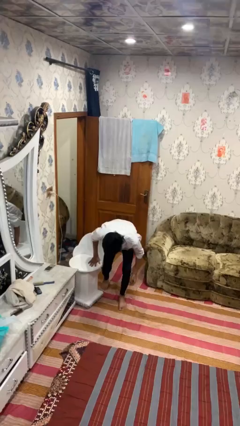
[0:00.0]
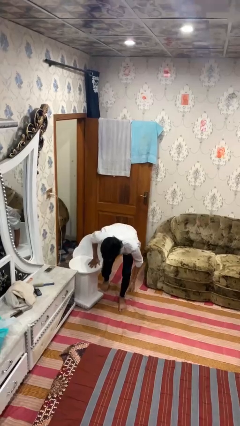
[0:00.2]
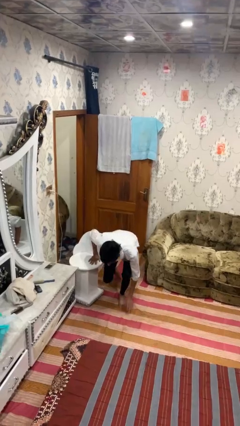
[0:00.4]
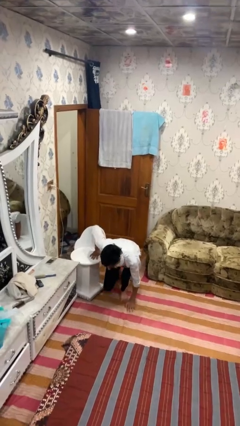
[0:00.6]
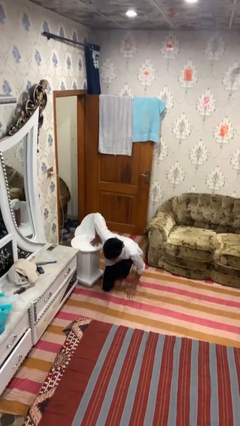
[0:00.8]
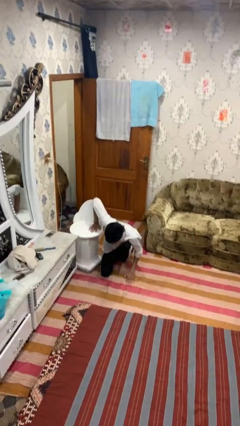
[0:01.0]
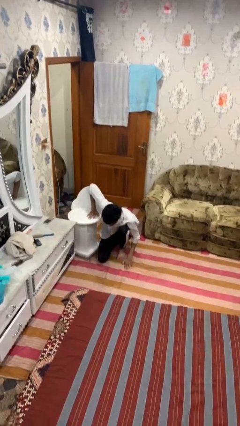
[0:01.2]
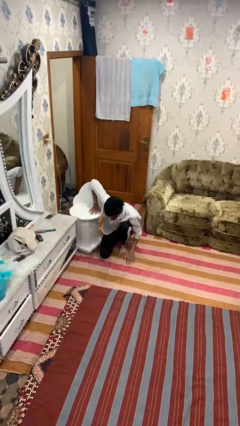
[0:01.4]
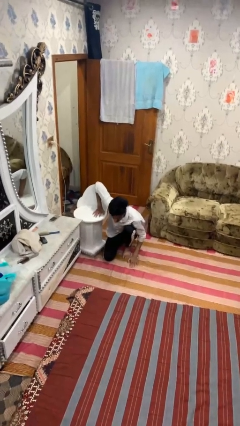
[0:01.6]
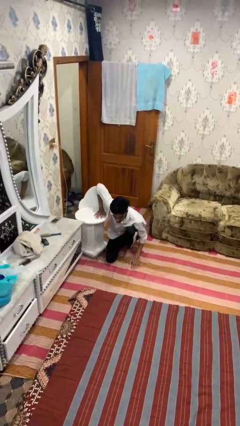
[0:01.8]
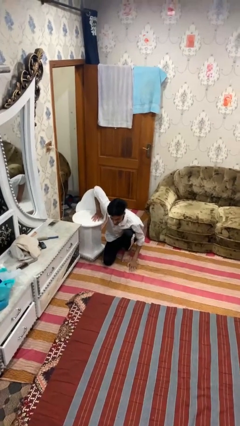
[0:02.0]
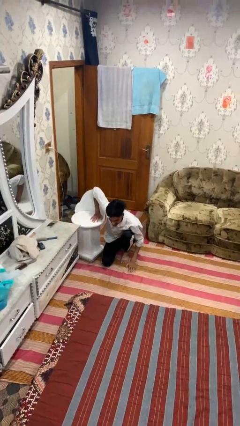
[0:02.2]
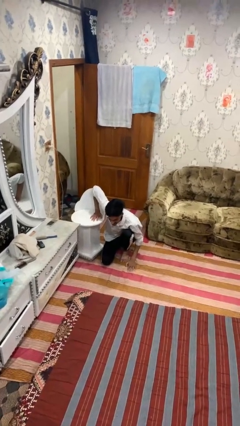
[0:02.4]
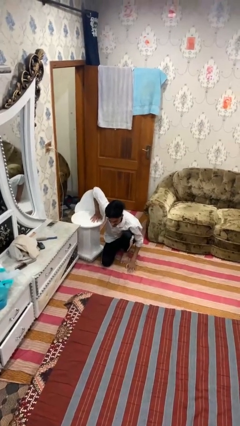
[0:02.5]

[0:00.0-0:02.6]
person lies down on floor

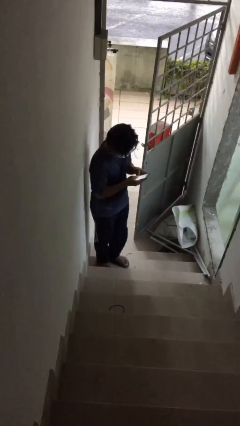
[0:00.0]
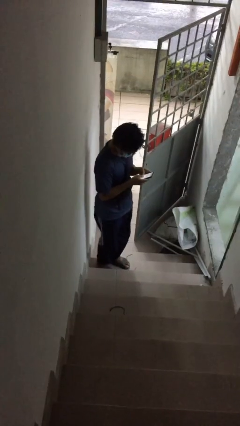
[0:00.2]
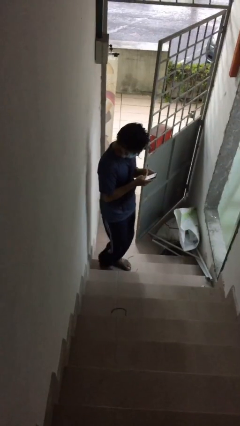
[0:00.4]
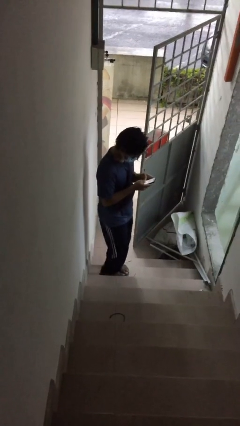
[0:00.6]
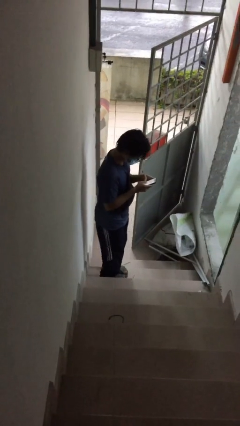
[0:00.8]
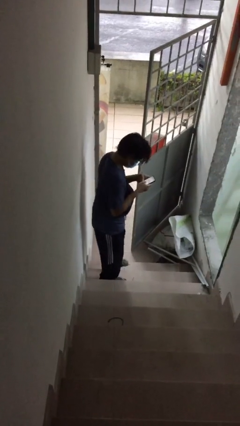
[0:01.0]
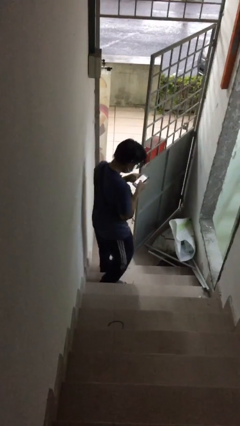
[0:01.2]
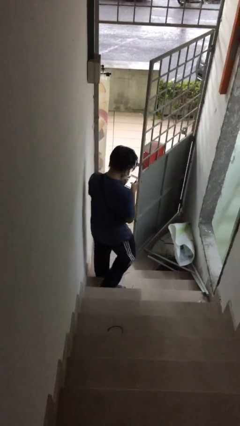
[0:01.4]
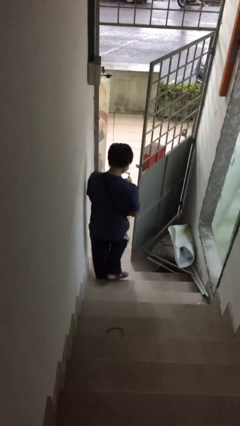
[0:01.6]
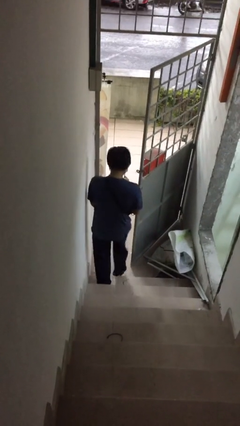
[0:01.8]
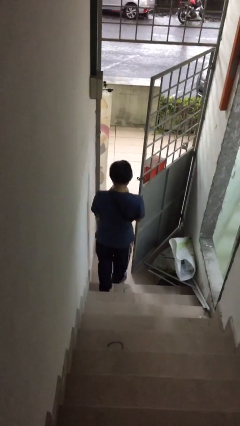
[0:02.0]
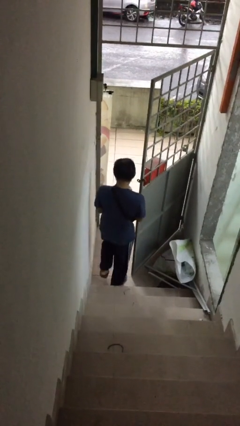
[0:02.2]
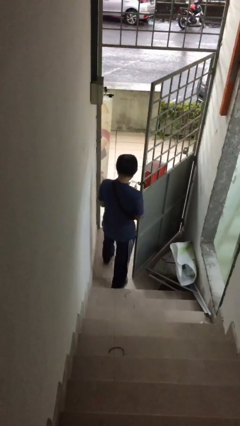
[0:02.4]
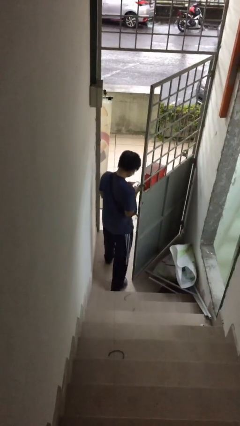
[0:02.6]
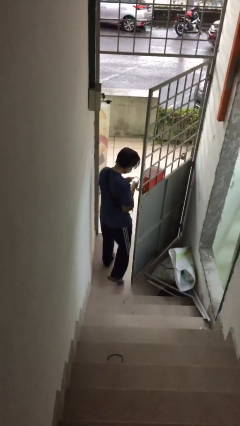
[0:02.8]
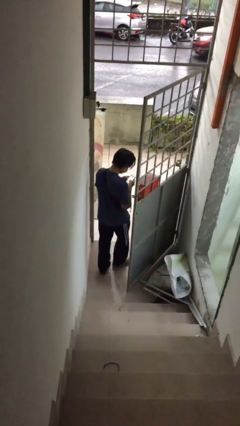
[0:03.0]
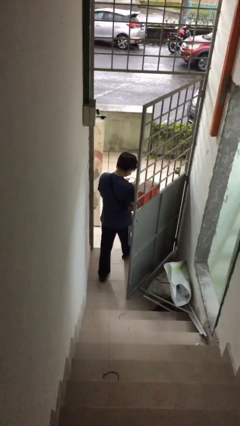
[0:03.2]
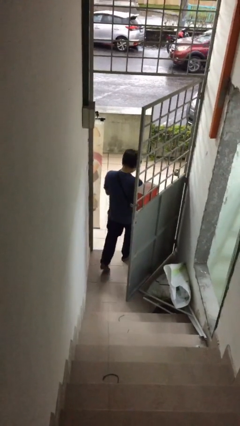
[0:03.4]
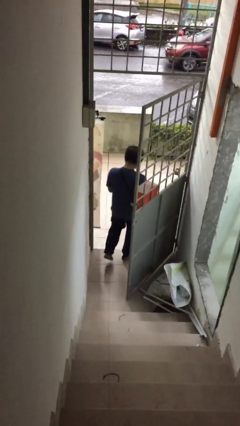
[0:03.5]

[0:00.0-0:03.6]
person exits scene through structure

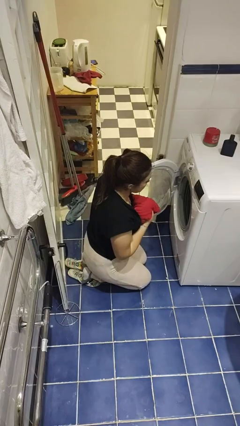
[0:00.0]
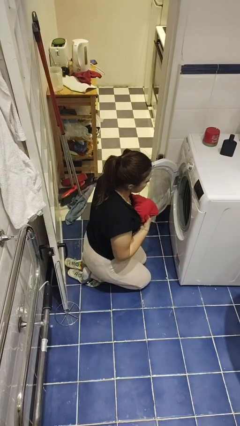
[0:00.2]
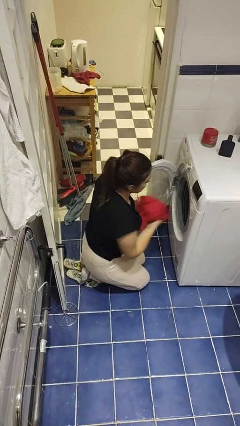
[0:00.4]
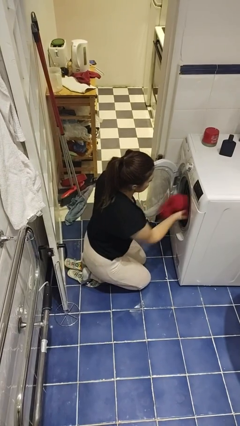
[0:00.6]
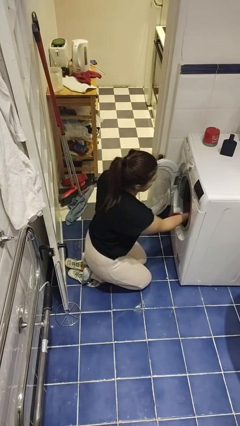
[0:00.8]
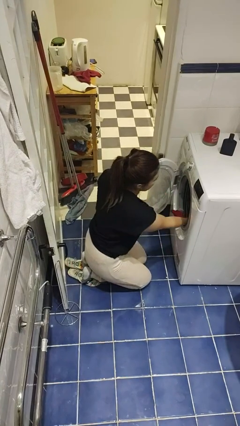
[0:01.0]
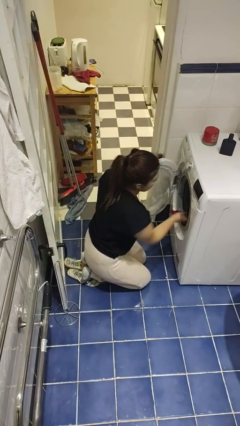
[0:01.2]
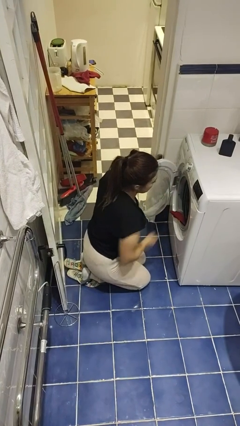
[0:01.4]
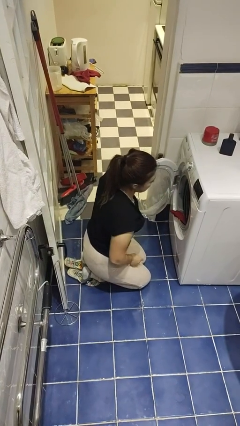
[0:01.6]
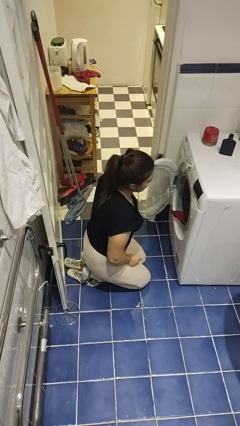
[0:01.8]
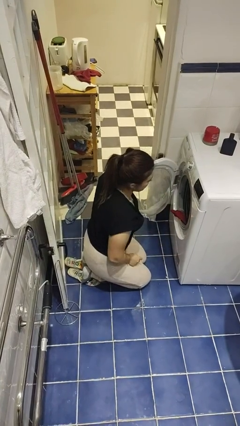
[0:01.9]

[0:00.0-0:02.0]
person loads dryer

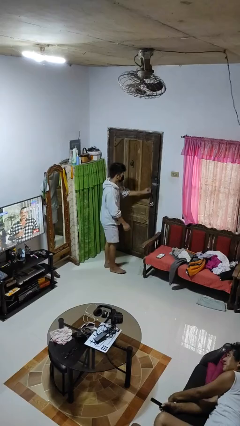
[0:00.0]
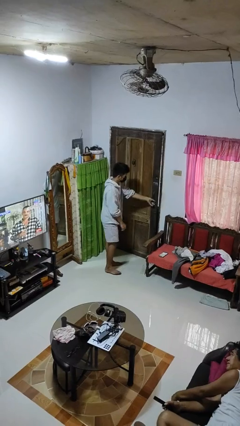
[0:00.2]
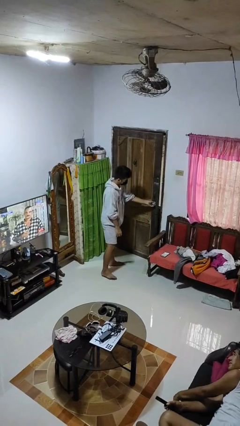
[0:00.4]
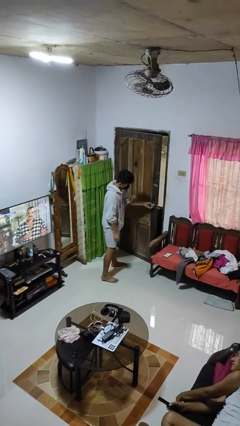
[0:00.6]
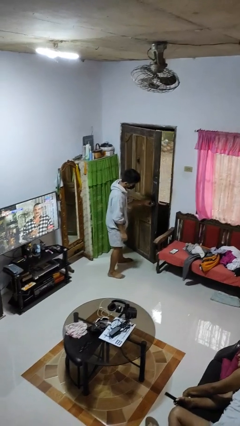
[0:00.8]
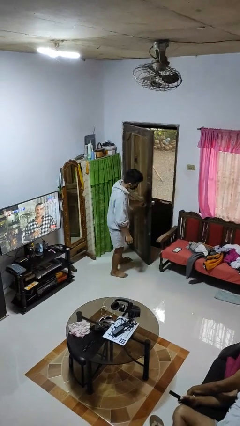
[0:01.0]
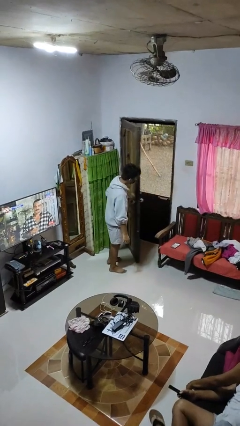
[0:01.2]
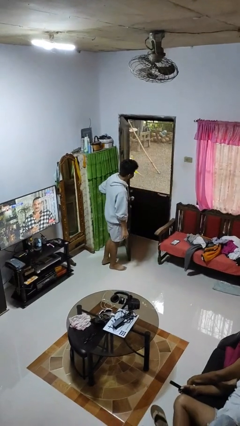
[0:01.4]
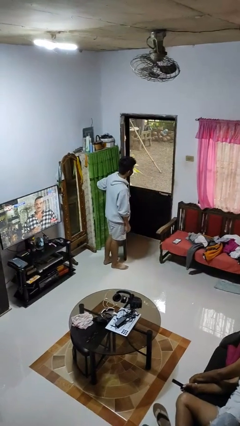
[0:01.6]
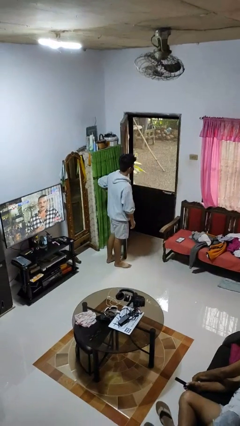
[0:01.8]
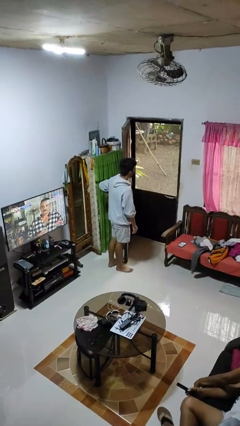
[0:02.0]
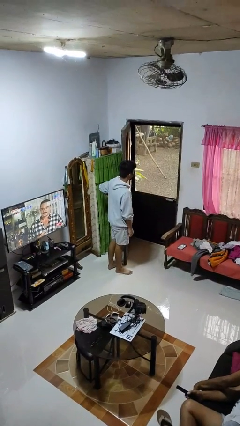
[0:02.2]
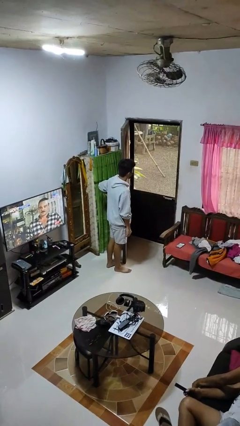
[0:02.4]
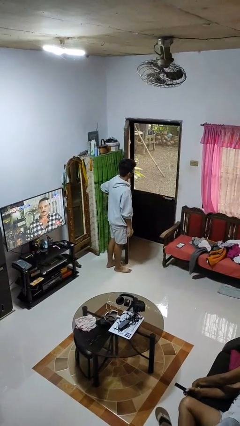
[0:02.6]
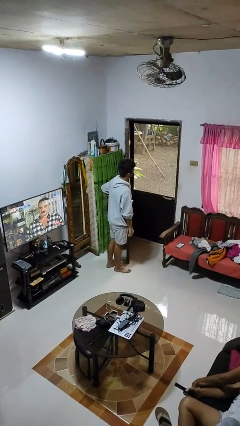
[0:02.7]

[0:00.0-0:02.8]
person opens facility door

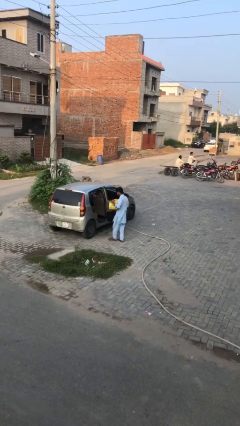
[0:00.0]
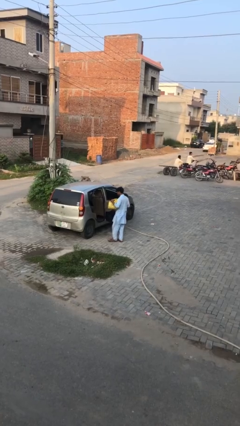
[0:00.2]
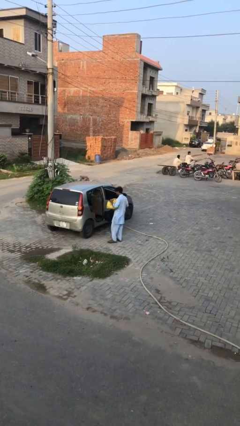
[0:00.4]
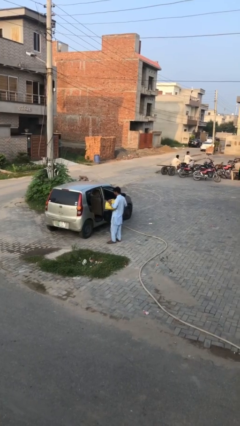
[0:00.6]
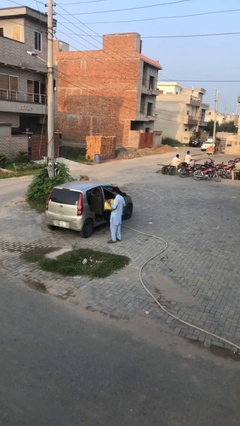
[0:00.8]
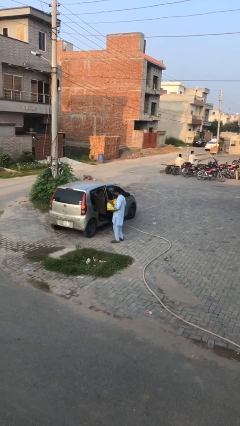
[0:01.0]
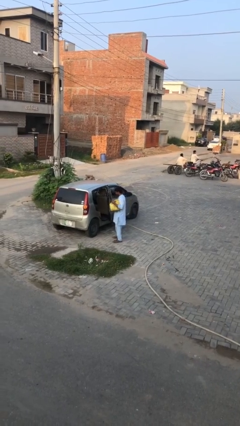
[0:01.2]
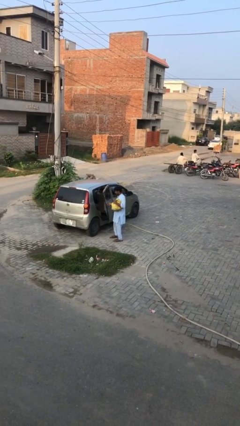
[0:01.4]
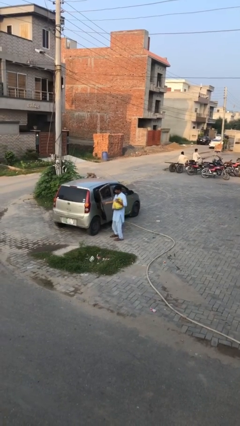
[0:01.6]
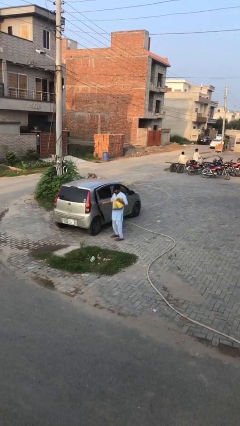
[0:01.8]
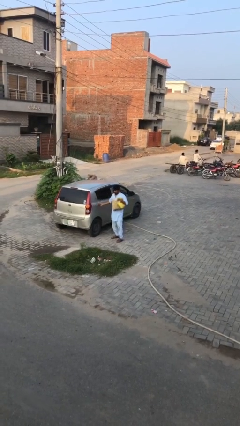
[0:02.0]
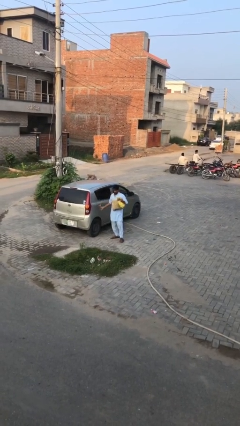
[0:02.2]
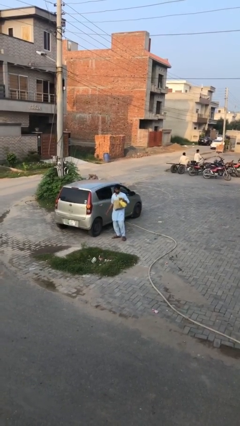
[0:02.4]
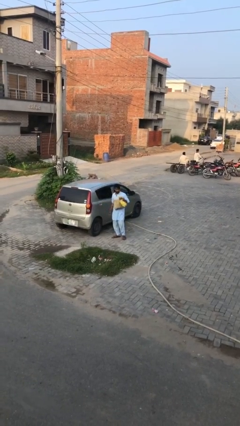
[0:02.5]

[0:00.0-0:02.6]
person closes car door

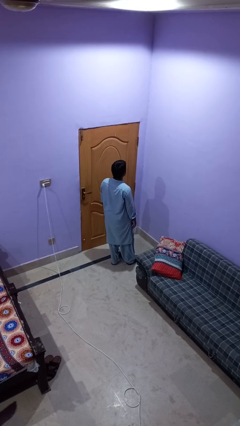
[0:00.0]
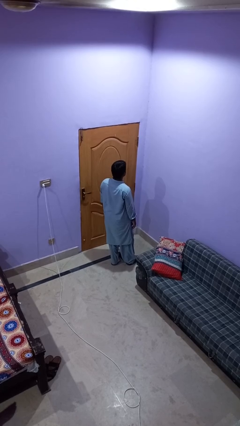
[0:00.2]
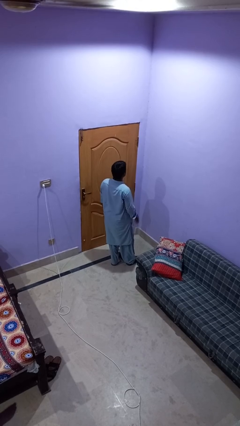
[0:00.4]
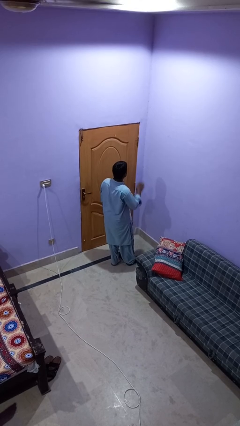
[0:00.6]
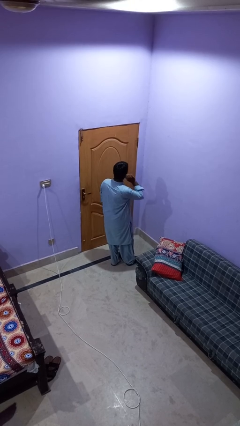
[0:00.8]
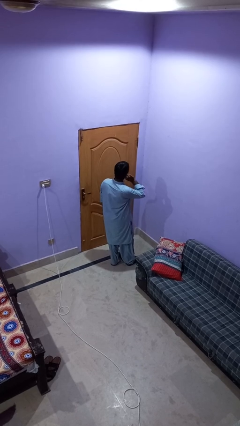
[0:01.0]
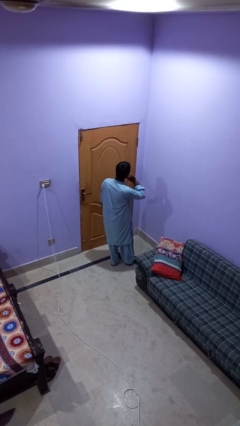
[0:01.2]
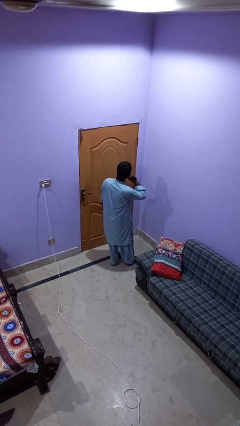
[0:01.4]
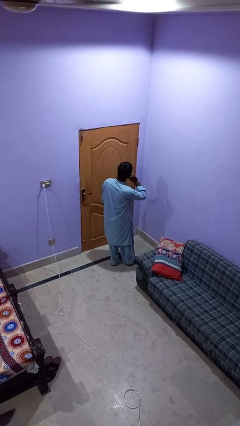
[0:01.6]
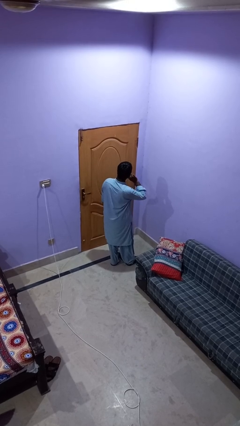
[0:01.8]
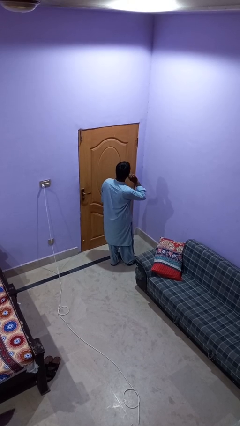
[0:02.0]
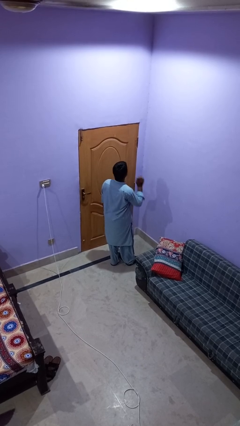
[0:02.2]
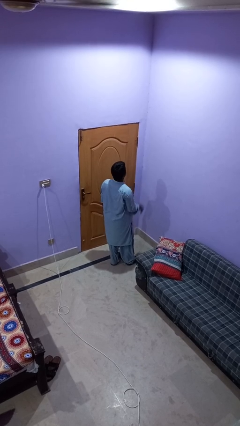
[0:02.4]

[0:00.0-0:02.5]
person gestures listen closely

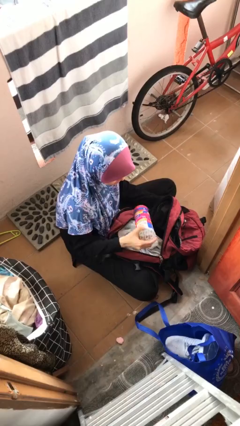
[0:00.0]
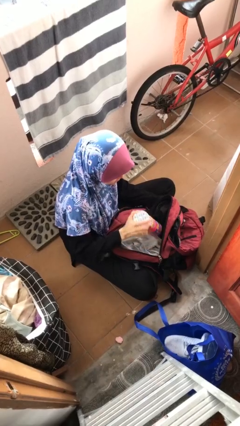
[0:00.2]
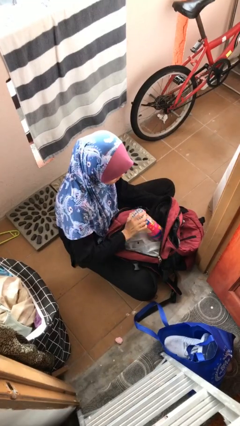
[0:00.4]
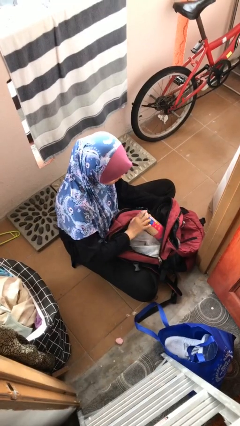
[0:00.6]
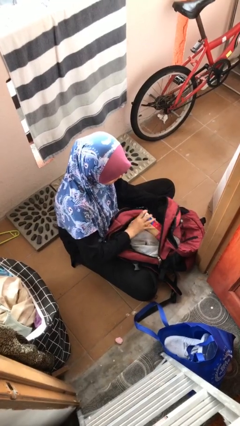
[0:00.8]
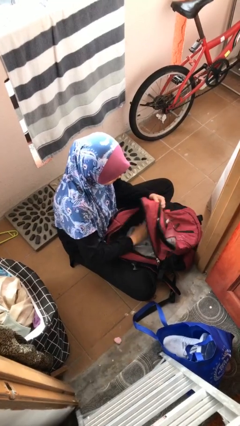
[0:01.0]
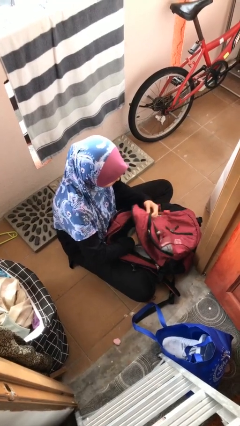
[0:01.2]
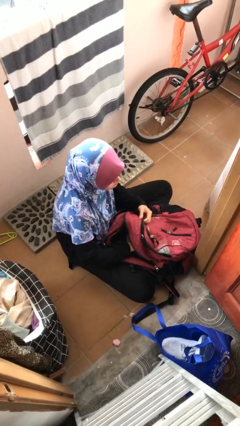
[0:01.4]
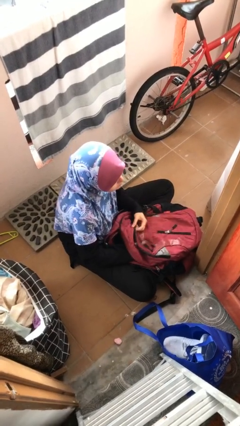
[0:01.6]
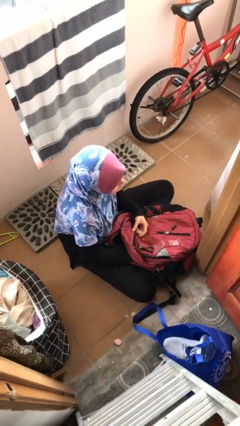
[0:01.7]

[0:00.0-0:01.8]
person puts object into backpack
